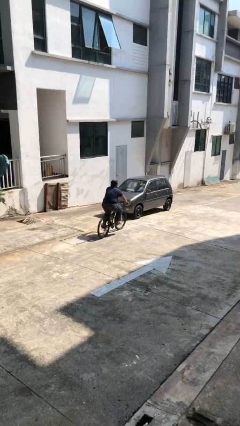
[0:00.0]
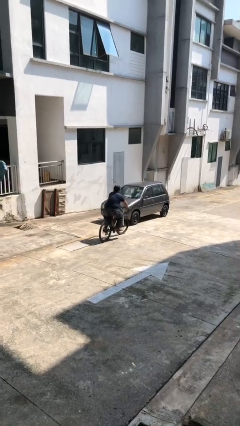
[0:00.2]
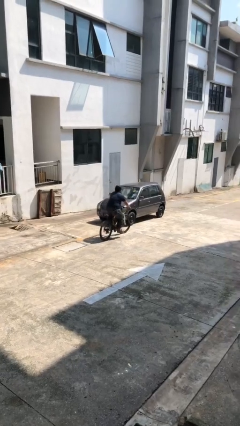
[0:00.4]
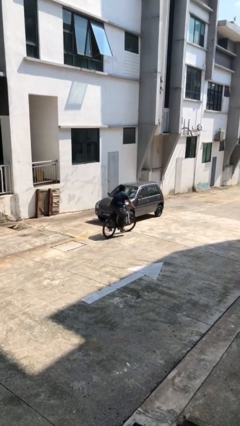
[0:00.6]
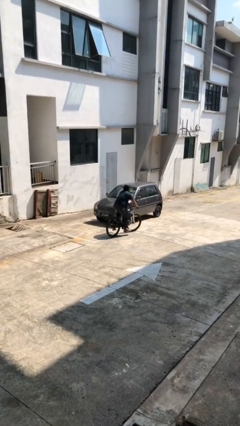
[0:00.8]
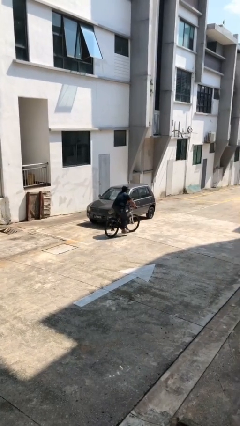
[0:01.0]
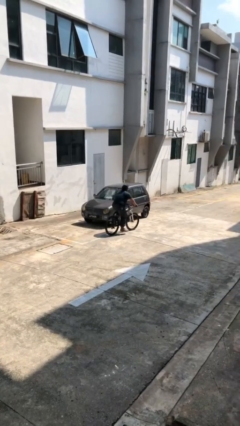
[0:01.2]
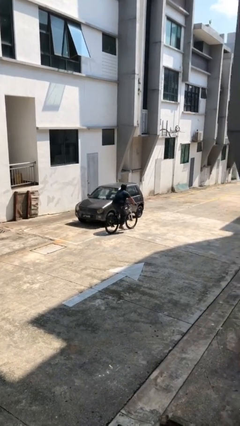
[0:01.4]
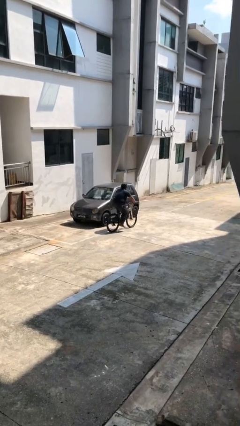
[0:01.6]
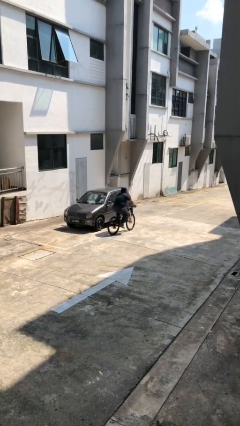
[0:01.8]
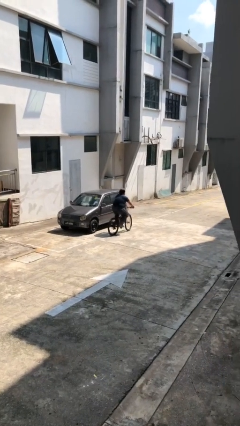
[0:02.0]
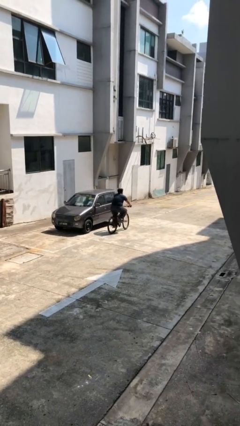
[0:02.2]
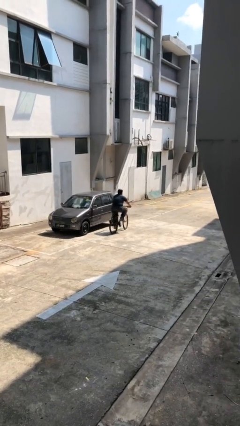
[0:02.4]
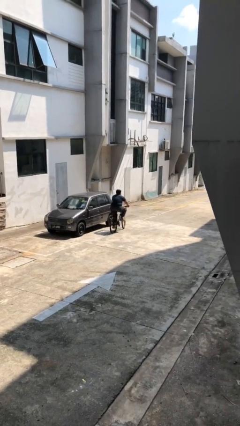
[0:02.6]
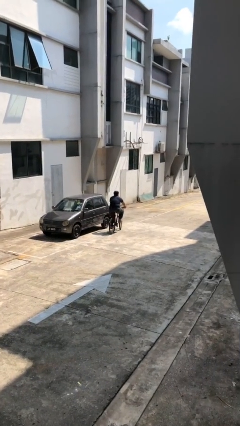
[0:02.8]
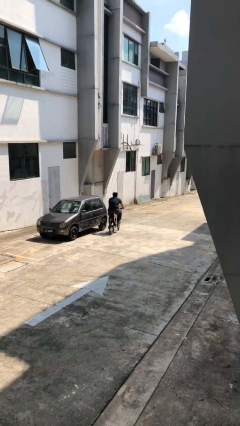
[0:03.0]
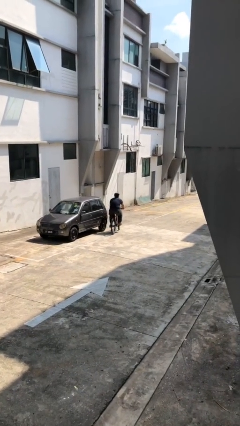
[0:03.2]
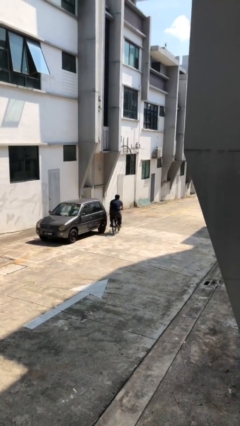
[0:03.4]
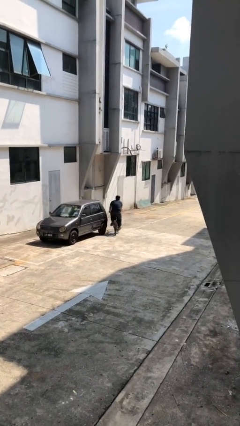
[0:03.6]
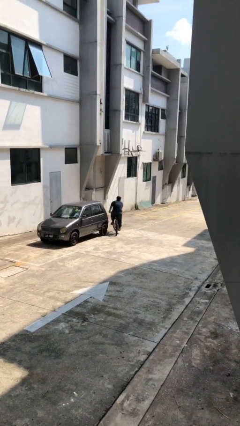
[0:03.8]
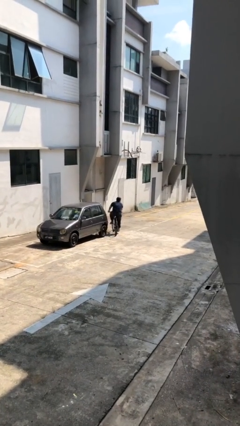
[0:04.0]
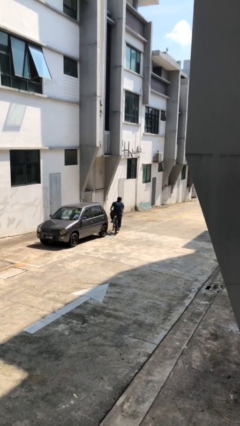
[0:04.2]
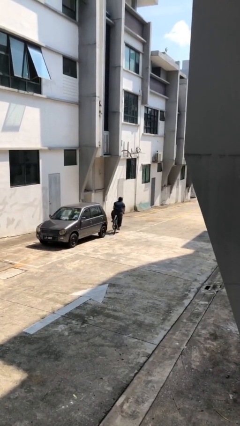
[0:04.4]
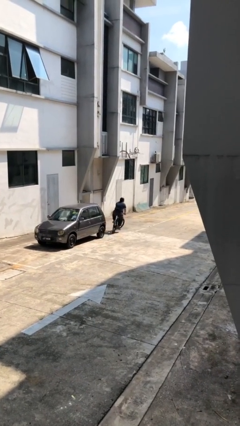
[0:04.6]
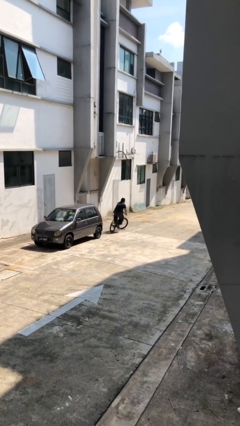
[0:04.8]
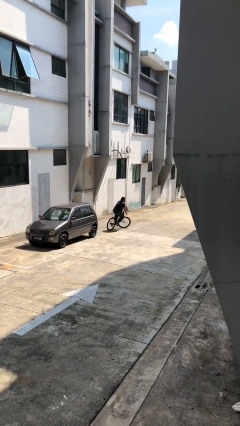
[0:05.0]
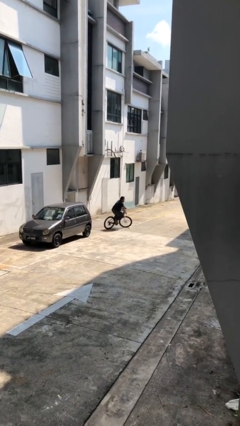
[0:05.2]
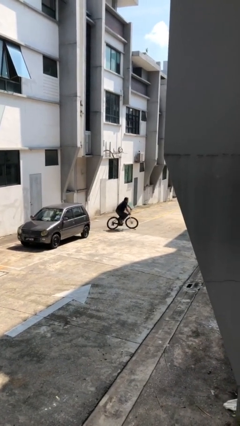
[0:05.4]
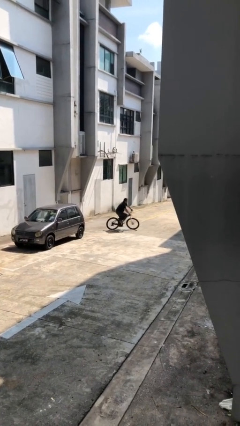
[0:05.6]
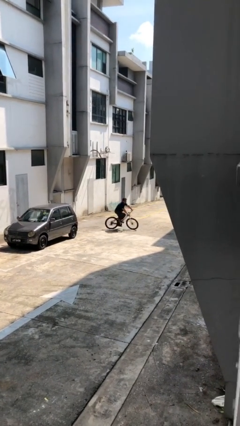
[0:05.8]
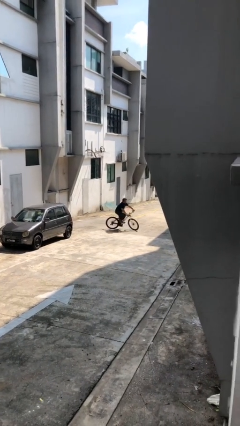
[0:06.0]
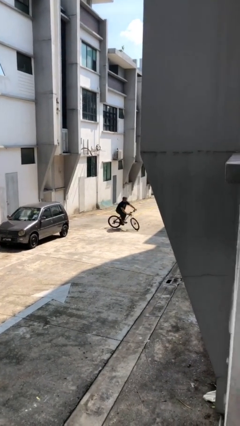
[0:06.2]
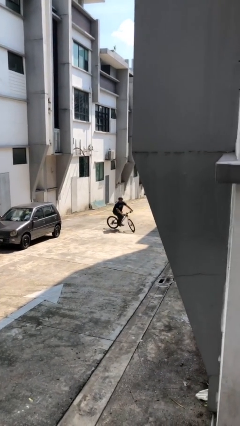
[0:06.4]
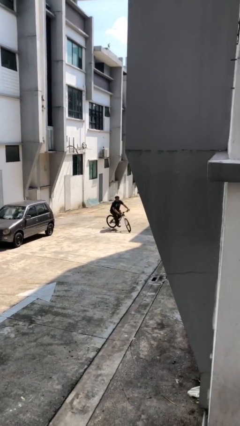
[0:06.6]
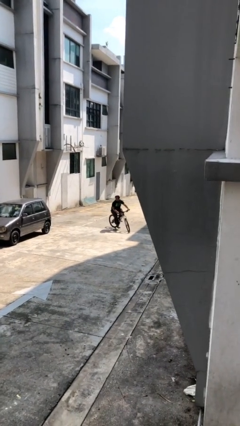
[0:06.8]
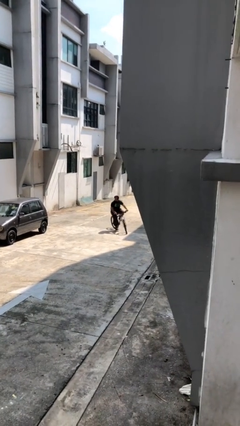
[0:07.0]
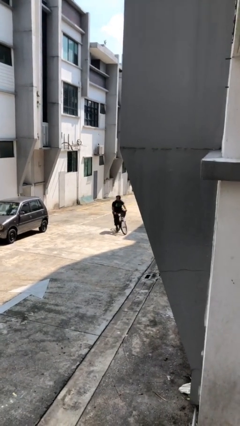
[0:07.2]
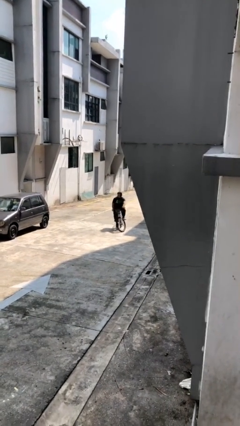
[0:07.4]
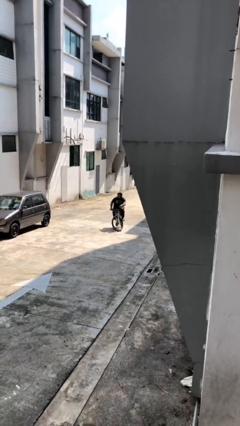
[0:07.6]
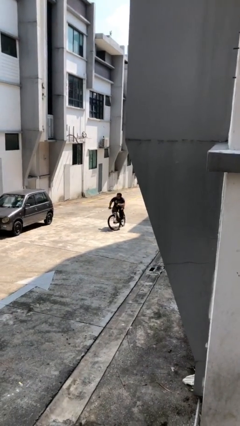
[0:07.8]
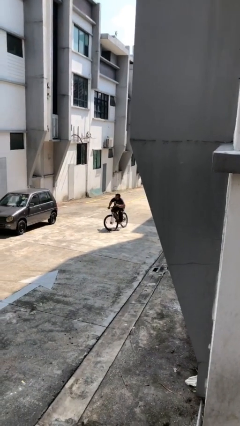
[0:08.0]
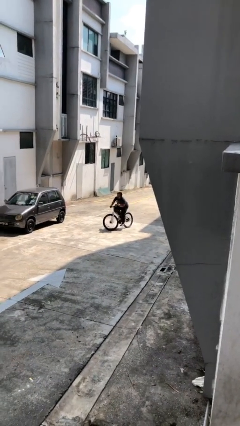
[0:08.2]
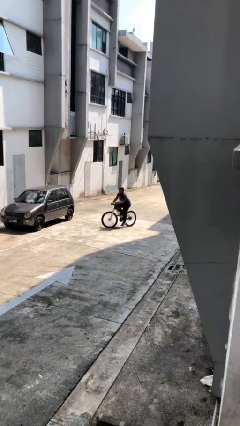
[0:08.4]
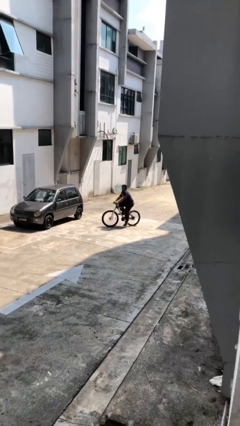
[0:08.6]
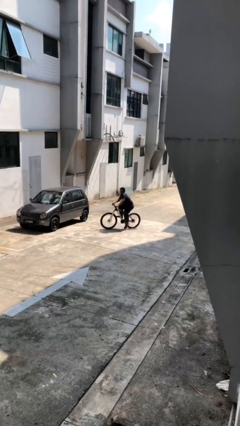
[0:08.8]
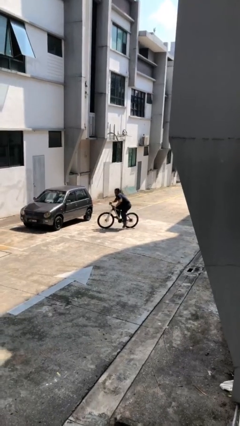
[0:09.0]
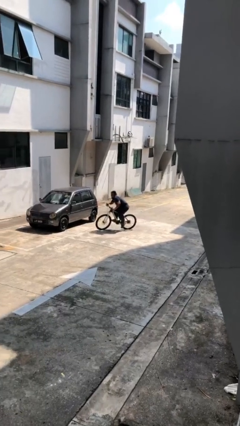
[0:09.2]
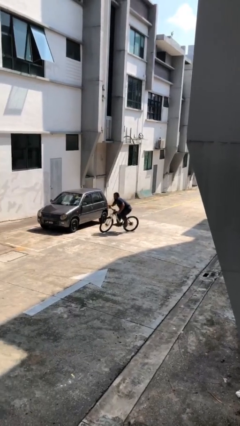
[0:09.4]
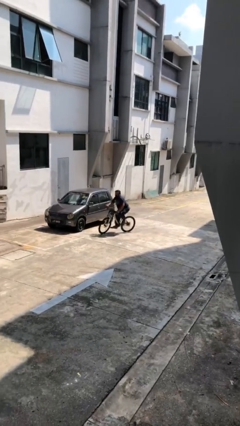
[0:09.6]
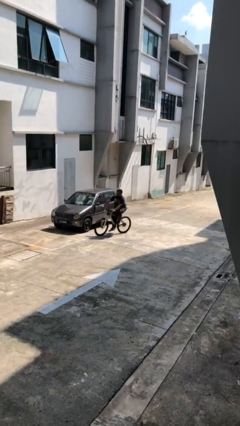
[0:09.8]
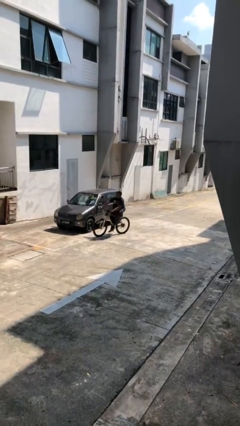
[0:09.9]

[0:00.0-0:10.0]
person rides bicycle

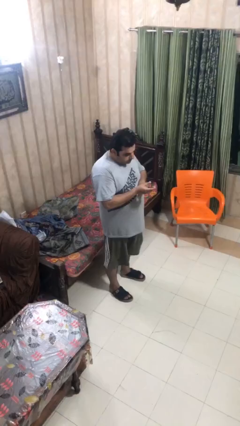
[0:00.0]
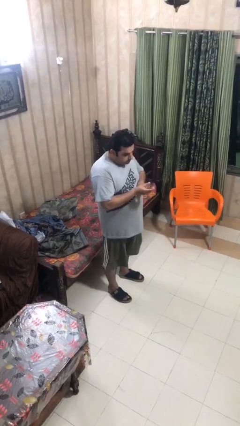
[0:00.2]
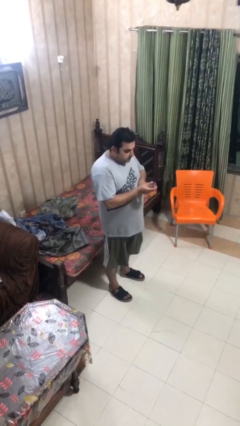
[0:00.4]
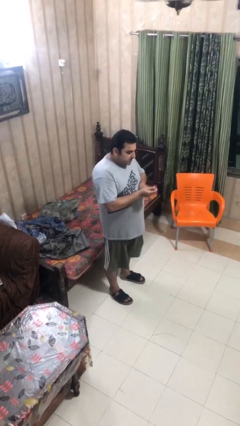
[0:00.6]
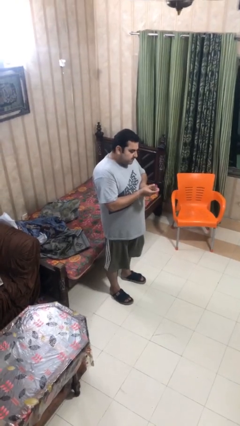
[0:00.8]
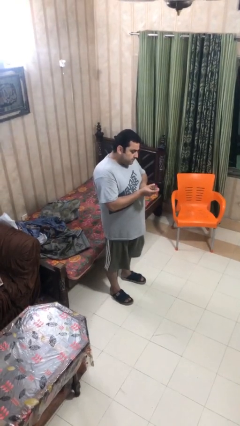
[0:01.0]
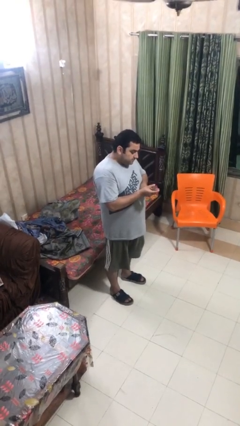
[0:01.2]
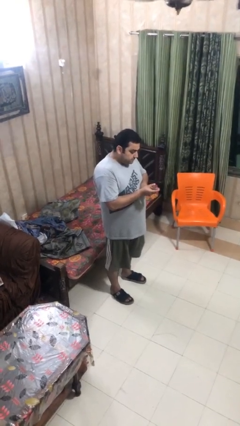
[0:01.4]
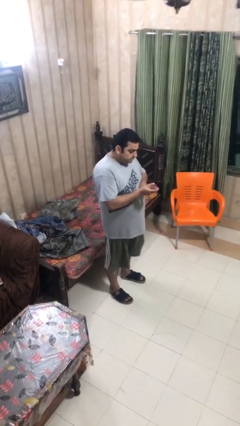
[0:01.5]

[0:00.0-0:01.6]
person clips fingernails

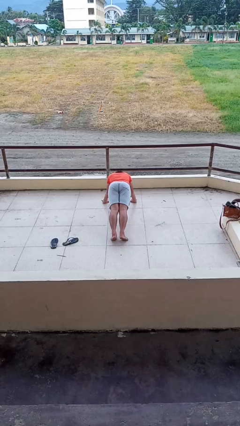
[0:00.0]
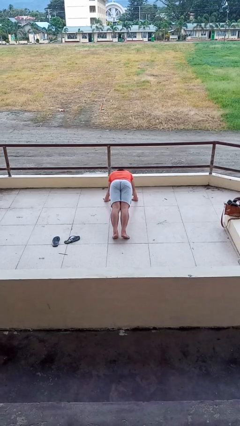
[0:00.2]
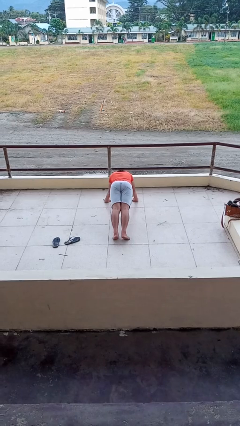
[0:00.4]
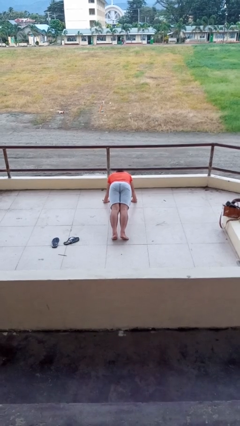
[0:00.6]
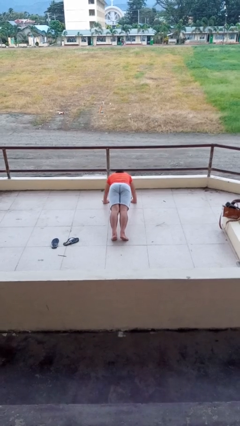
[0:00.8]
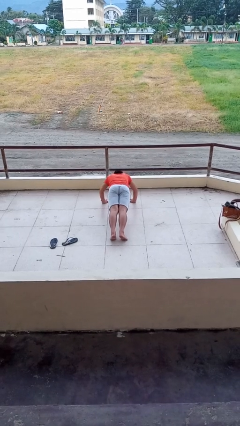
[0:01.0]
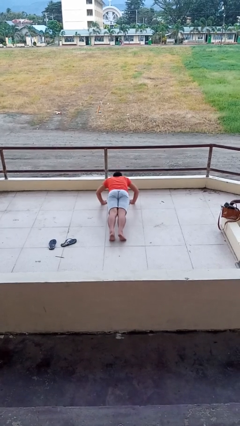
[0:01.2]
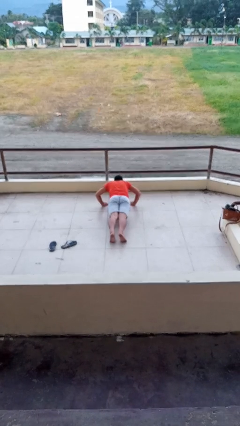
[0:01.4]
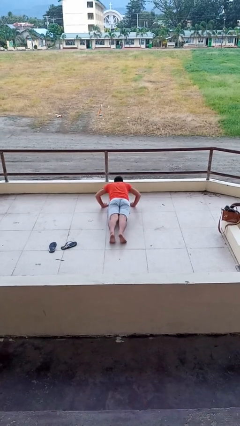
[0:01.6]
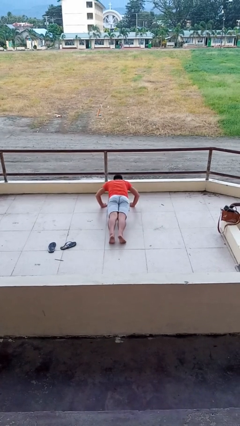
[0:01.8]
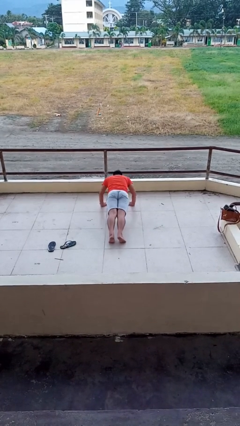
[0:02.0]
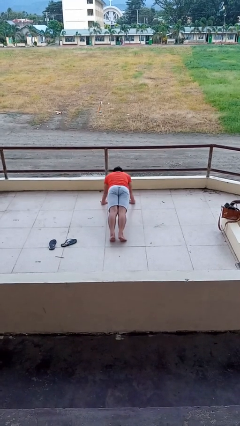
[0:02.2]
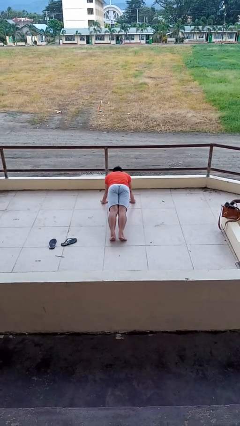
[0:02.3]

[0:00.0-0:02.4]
person exercises with pushup

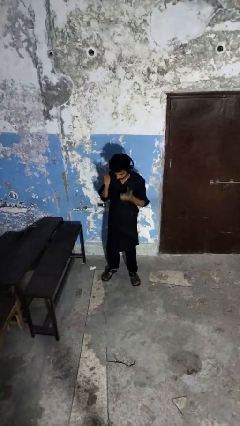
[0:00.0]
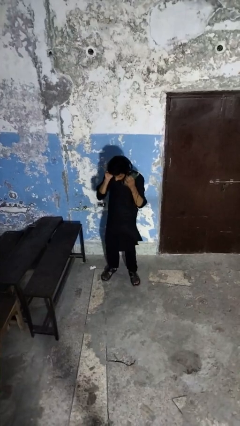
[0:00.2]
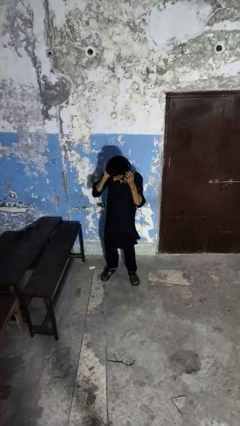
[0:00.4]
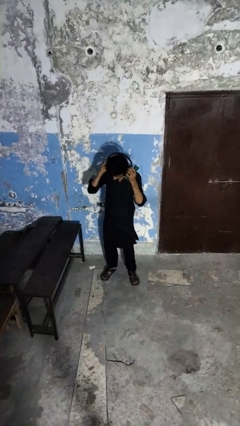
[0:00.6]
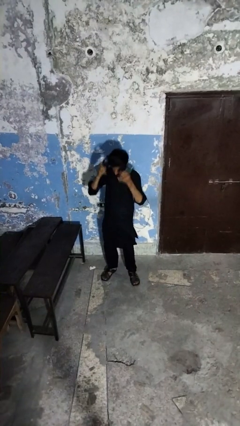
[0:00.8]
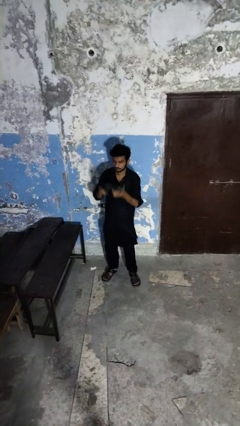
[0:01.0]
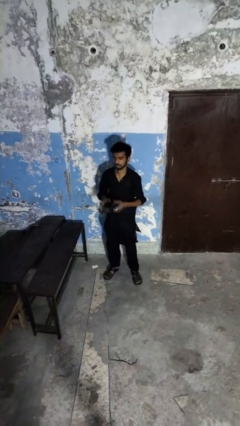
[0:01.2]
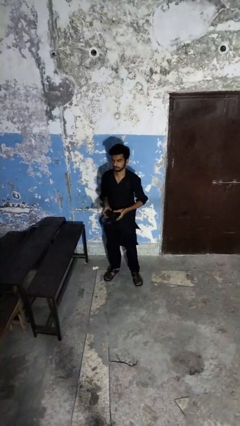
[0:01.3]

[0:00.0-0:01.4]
person takes off headphones

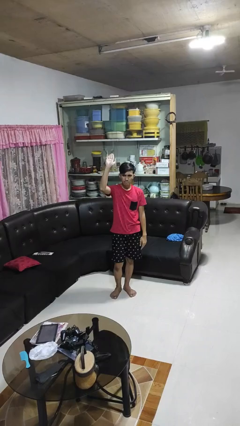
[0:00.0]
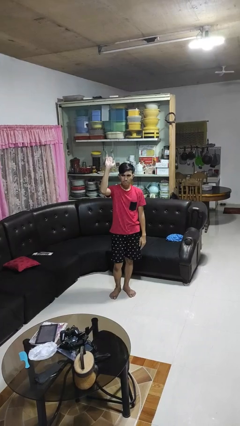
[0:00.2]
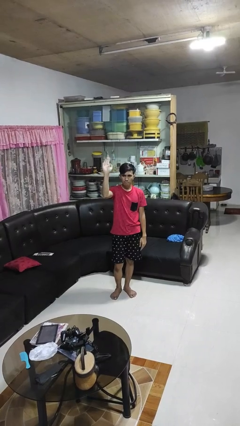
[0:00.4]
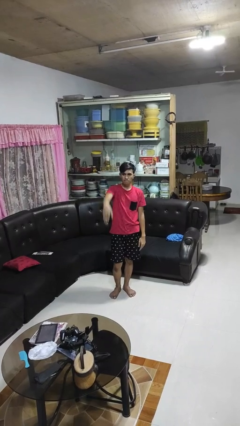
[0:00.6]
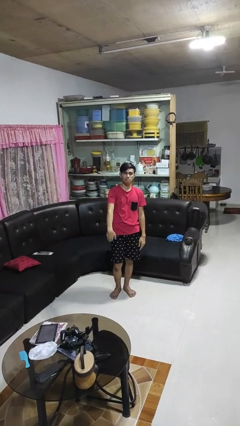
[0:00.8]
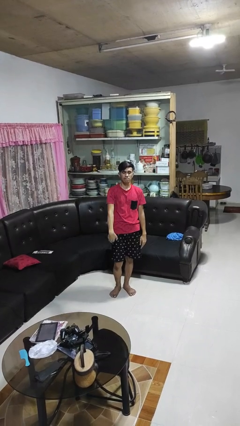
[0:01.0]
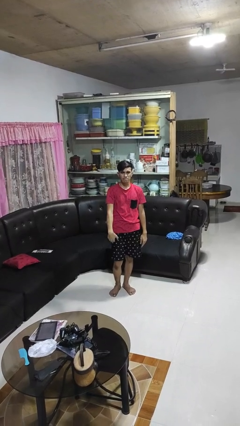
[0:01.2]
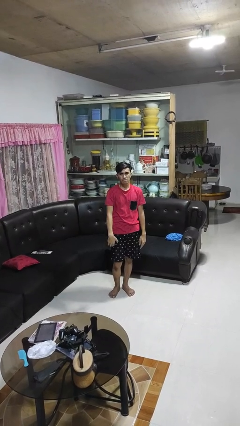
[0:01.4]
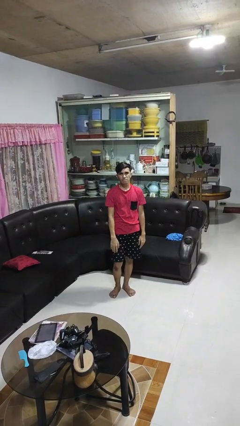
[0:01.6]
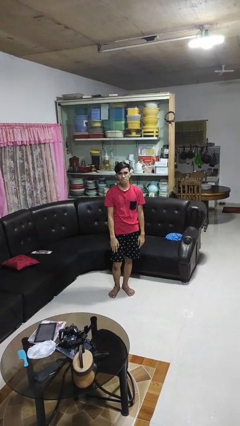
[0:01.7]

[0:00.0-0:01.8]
person gestures swipe down

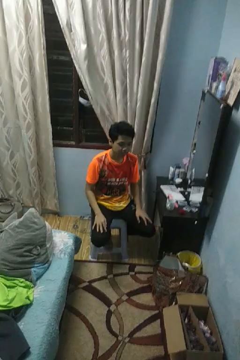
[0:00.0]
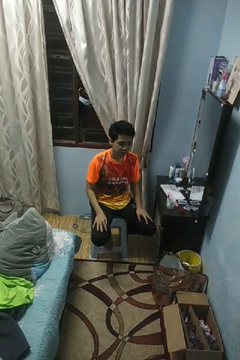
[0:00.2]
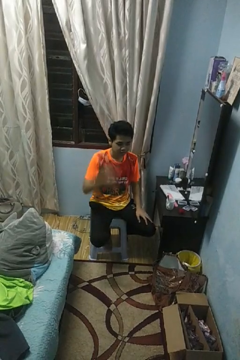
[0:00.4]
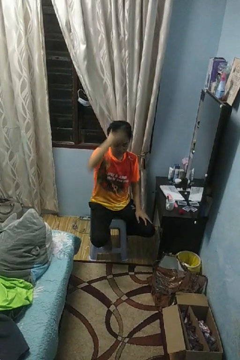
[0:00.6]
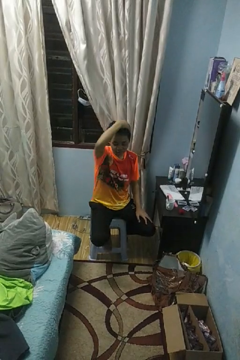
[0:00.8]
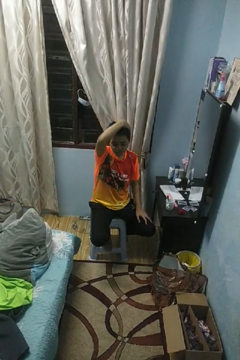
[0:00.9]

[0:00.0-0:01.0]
person strokes hair
